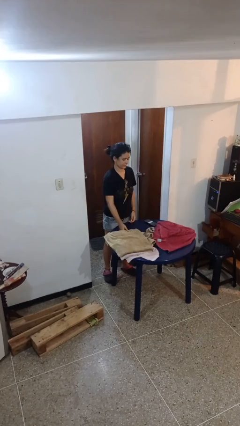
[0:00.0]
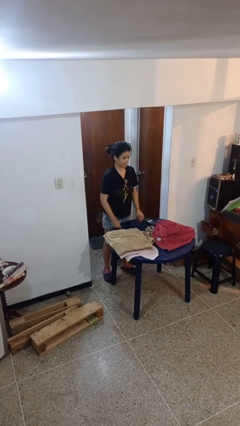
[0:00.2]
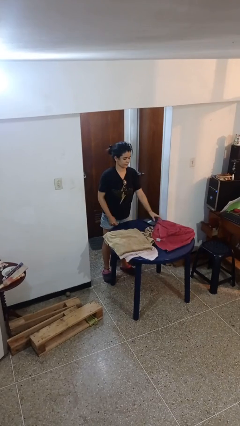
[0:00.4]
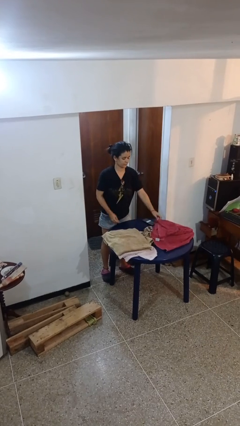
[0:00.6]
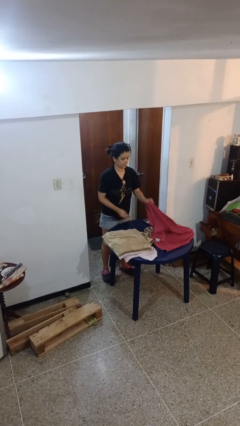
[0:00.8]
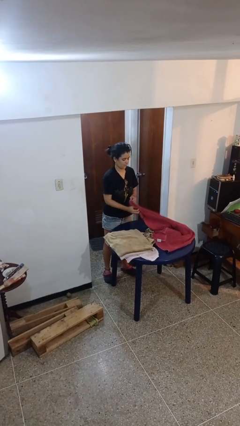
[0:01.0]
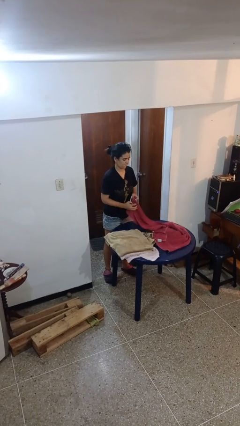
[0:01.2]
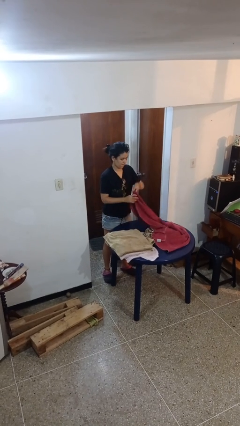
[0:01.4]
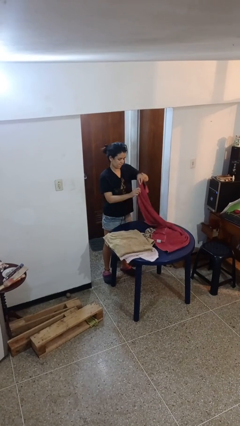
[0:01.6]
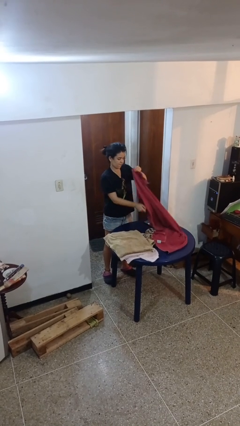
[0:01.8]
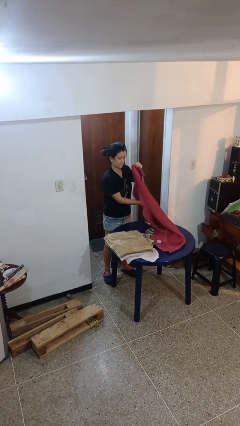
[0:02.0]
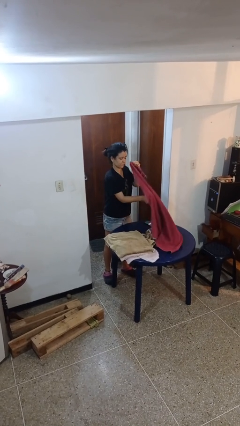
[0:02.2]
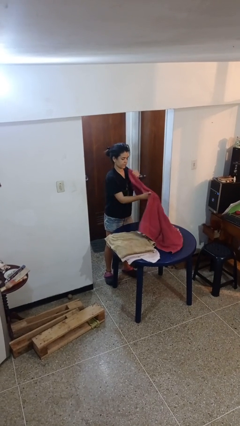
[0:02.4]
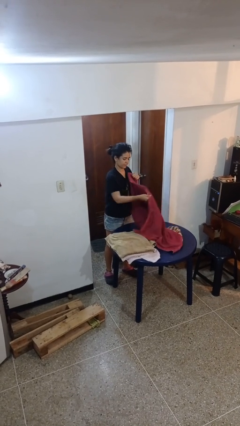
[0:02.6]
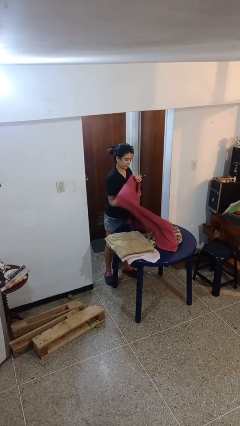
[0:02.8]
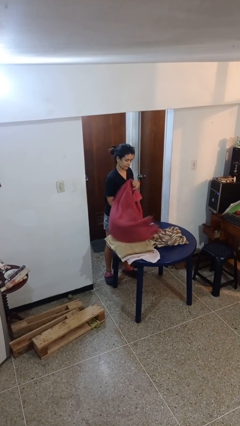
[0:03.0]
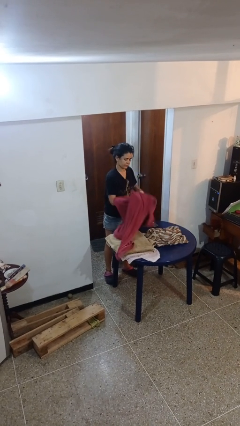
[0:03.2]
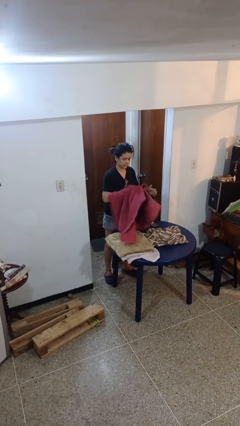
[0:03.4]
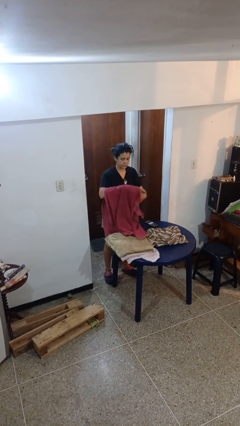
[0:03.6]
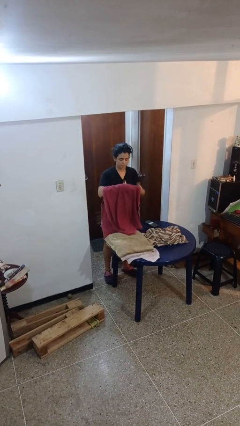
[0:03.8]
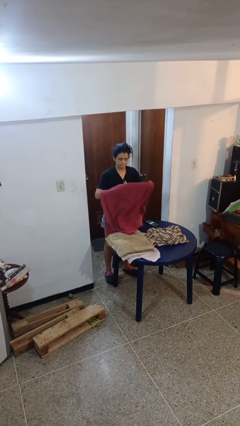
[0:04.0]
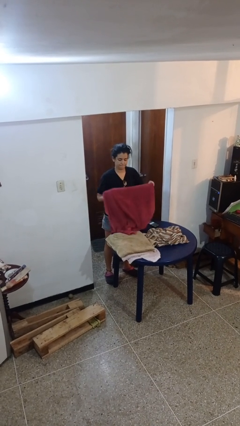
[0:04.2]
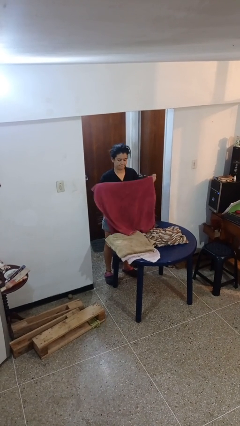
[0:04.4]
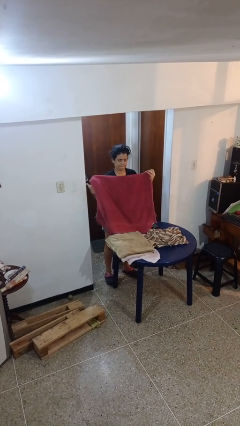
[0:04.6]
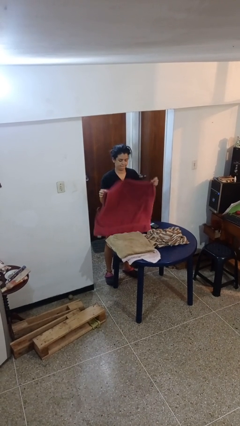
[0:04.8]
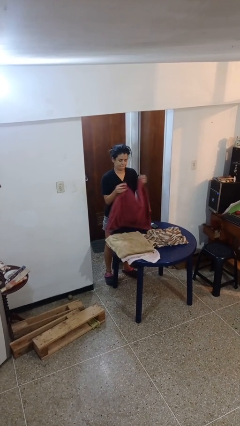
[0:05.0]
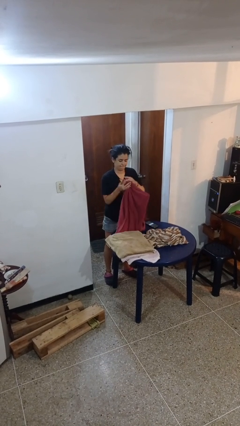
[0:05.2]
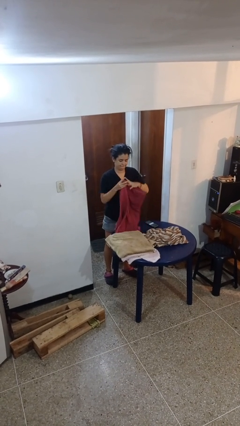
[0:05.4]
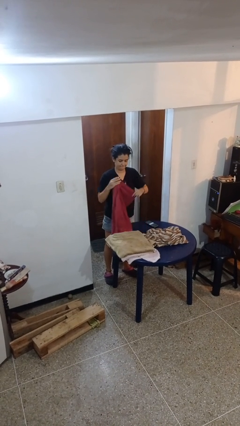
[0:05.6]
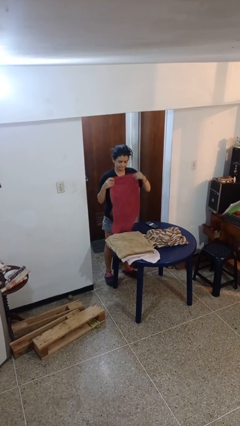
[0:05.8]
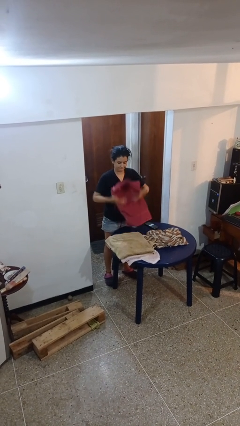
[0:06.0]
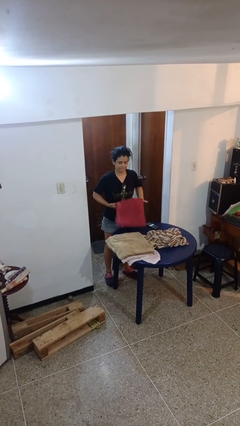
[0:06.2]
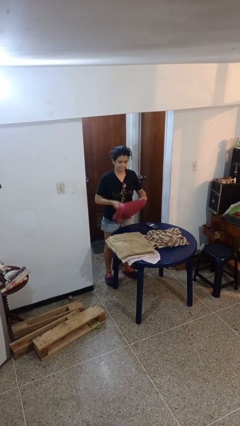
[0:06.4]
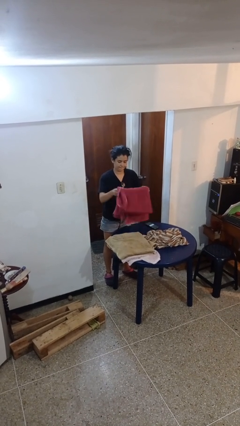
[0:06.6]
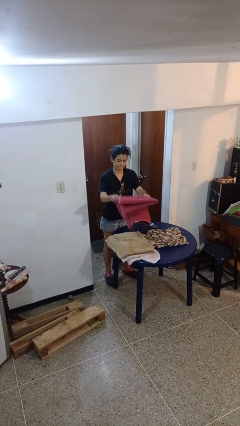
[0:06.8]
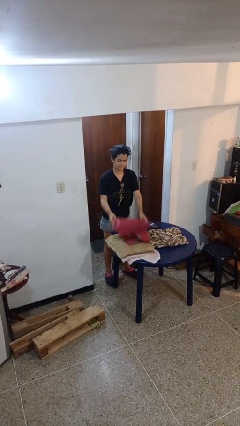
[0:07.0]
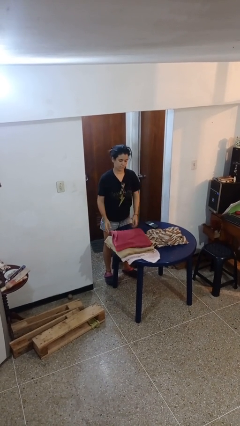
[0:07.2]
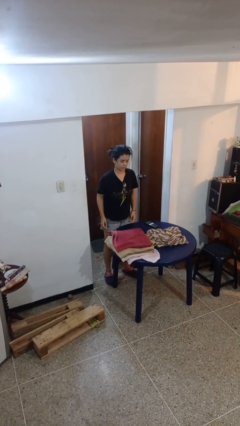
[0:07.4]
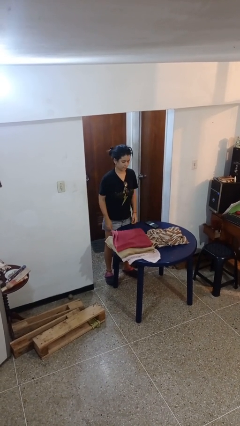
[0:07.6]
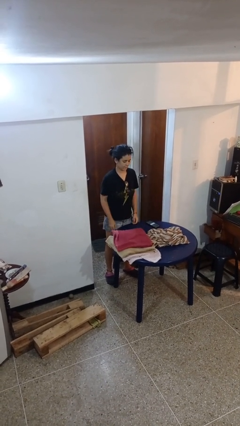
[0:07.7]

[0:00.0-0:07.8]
person folds towel

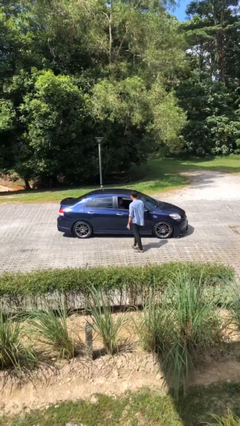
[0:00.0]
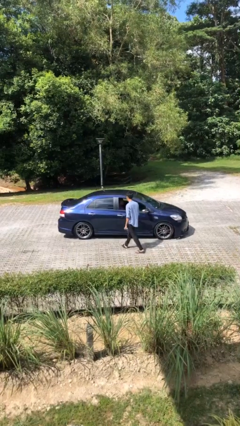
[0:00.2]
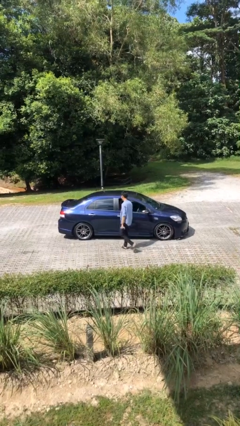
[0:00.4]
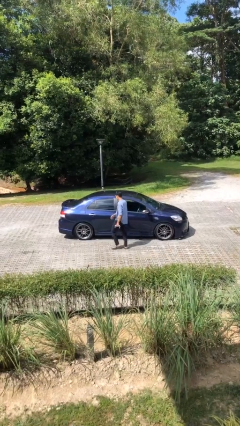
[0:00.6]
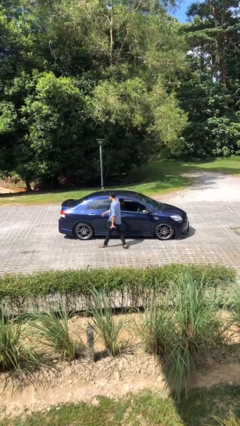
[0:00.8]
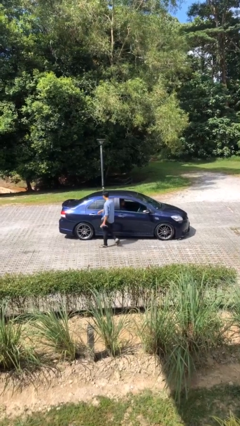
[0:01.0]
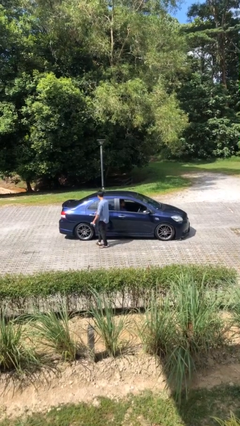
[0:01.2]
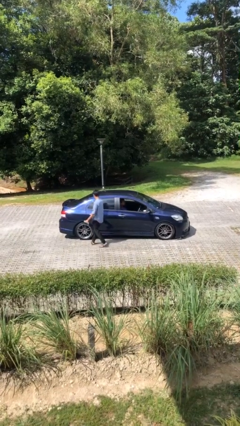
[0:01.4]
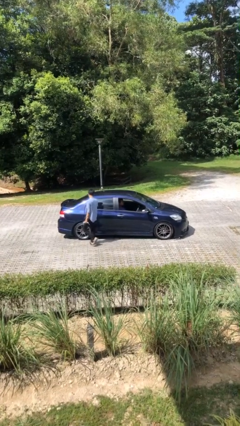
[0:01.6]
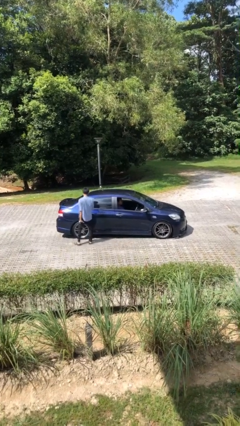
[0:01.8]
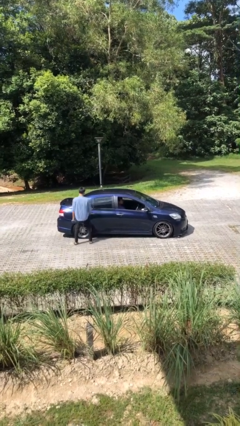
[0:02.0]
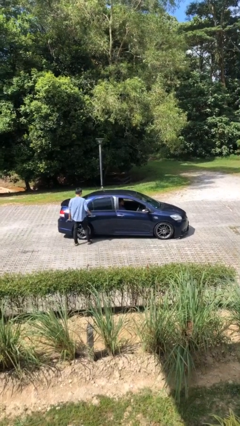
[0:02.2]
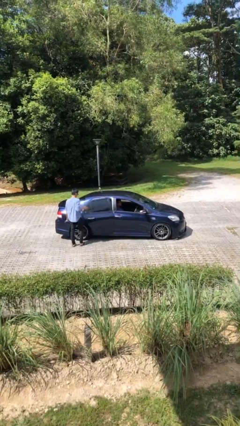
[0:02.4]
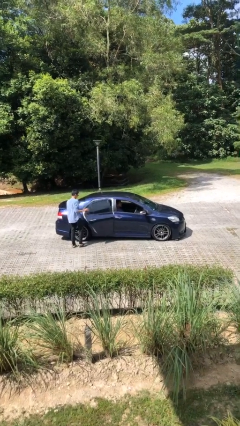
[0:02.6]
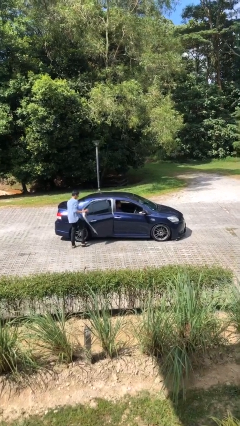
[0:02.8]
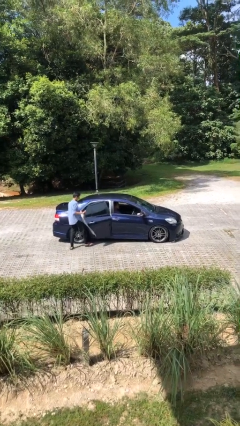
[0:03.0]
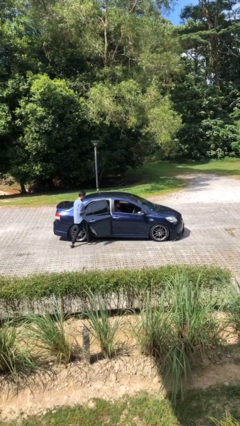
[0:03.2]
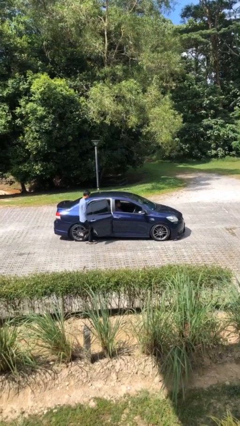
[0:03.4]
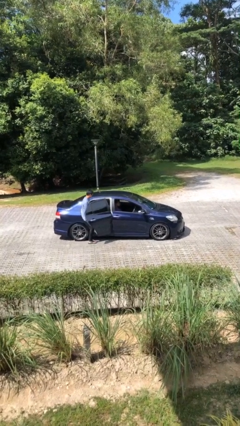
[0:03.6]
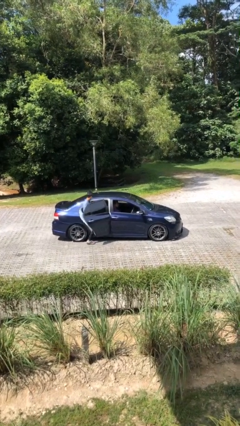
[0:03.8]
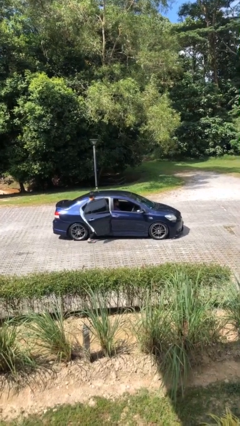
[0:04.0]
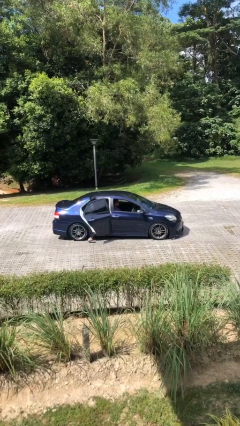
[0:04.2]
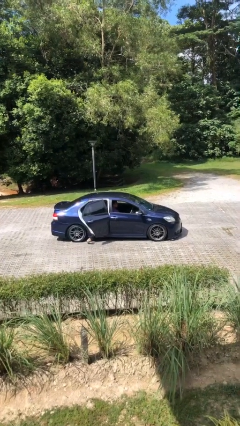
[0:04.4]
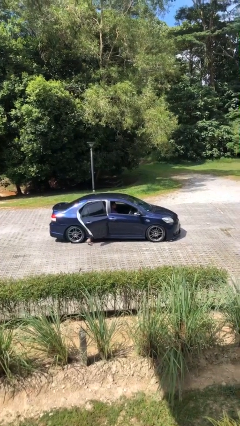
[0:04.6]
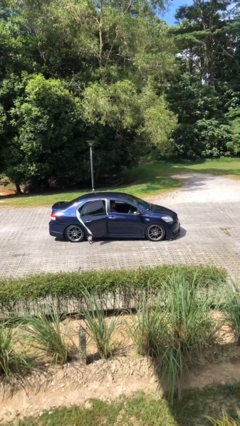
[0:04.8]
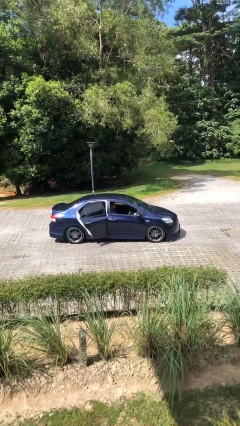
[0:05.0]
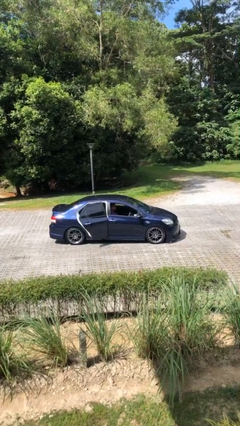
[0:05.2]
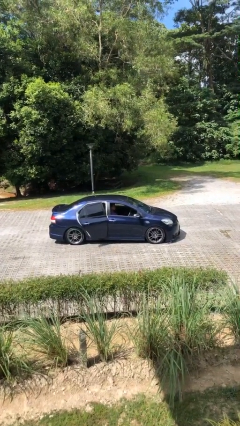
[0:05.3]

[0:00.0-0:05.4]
car picks up person

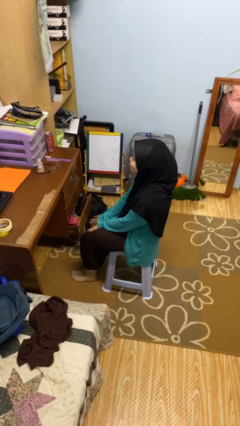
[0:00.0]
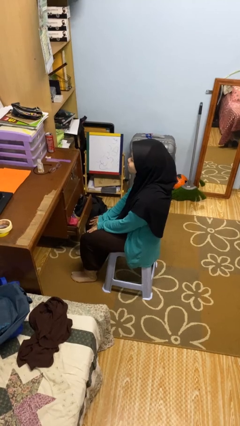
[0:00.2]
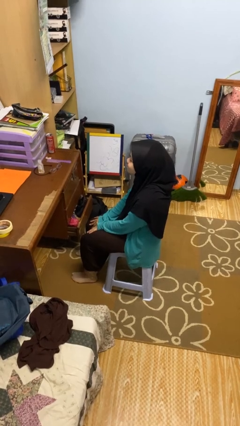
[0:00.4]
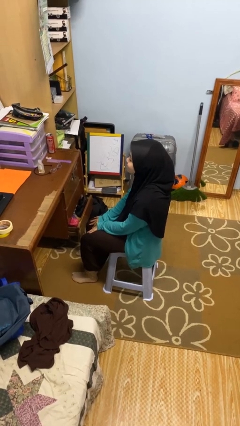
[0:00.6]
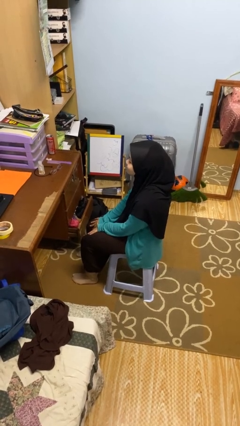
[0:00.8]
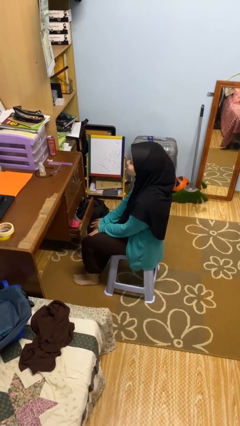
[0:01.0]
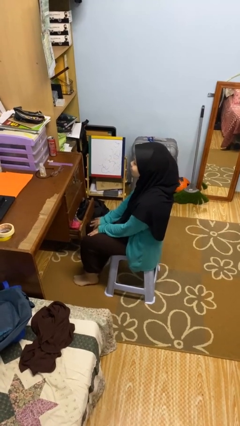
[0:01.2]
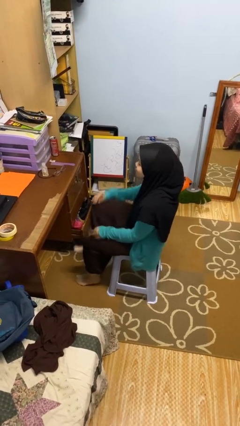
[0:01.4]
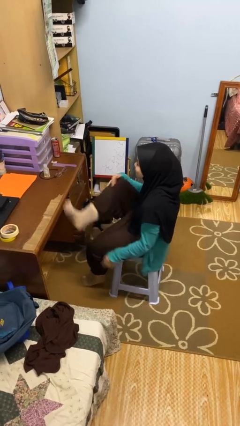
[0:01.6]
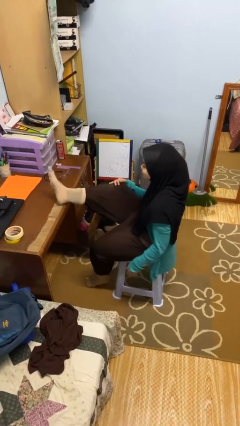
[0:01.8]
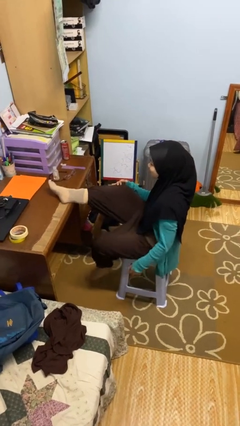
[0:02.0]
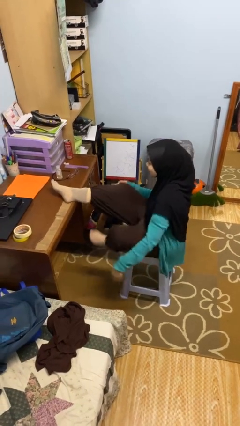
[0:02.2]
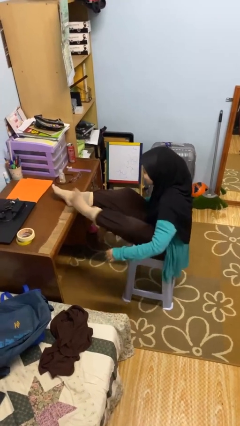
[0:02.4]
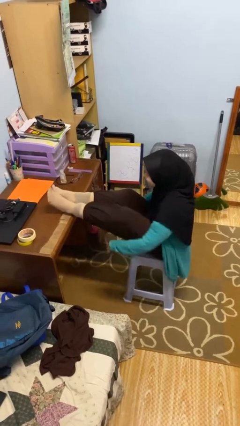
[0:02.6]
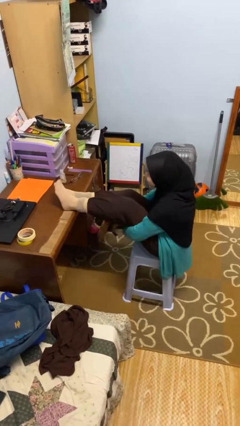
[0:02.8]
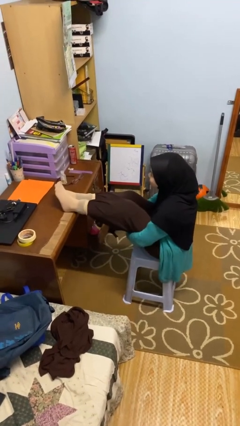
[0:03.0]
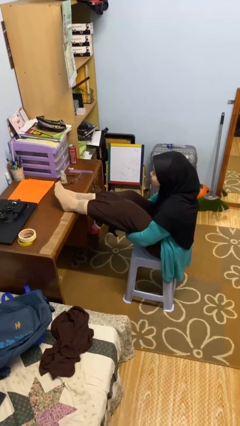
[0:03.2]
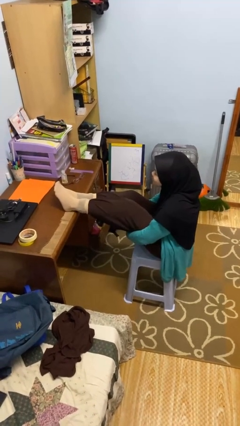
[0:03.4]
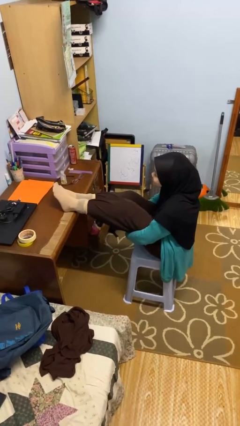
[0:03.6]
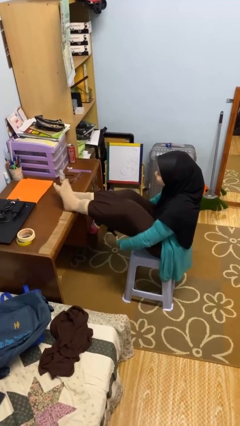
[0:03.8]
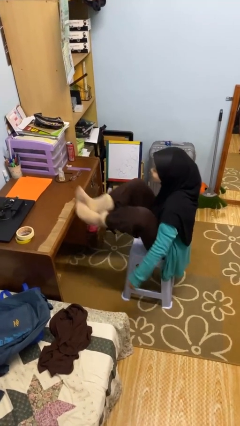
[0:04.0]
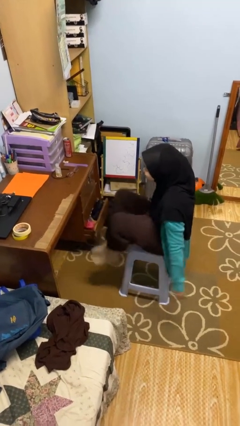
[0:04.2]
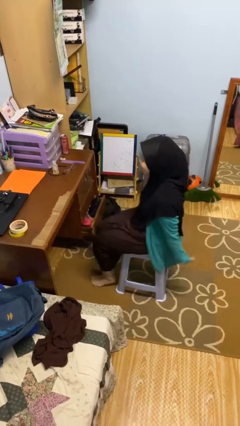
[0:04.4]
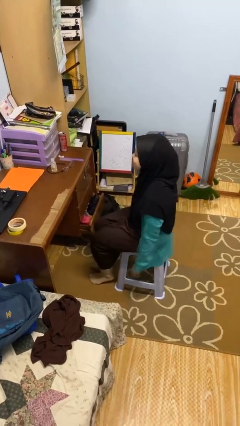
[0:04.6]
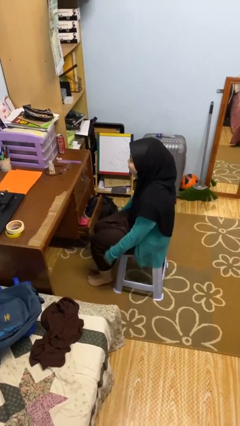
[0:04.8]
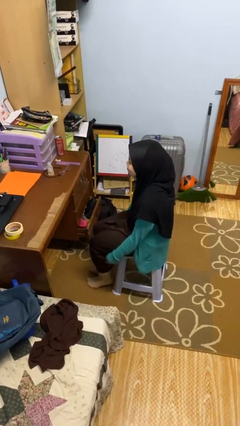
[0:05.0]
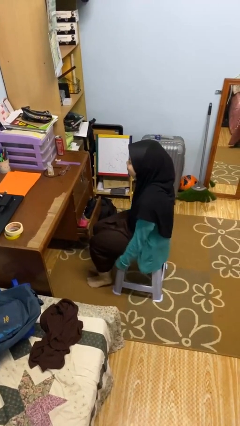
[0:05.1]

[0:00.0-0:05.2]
person puts feet up
